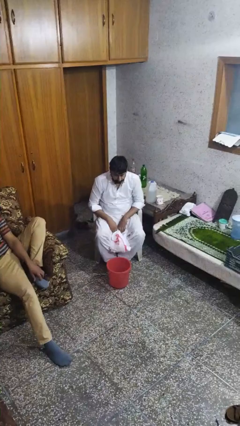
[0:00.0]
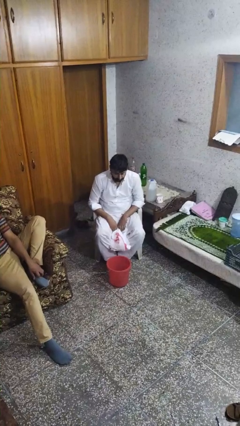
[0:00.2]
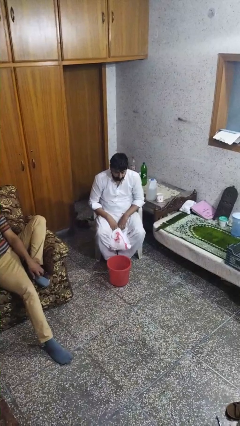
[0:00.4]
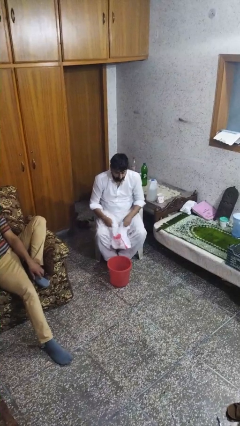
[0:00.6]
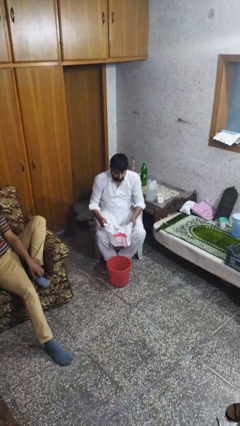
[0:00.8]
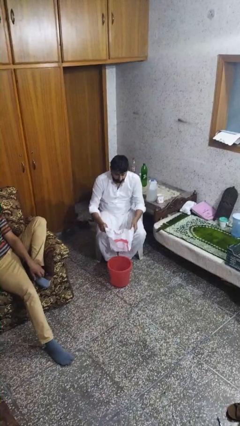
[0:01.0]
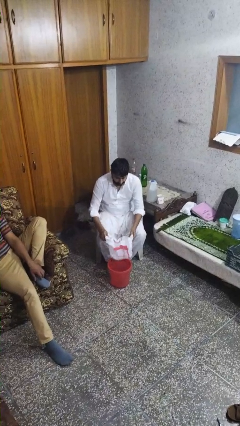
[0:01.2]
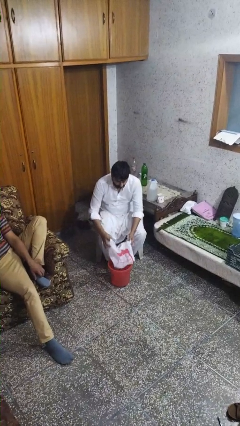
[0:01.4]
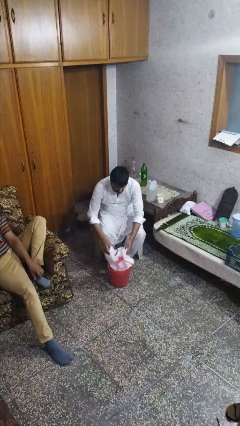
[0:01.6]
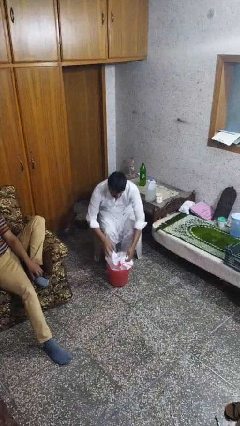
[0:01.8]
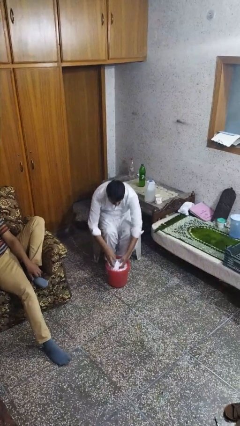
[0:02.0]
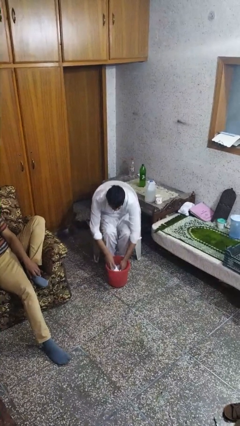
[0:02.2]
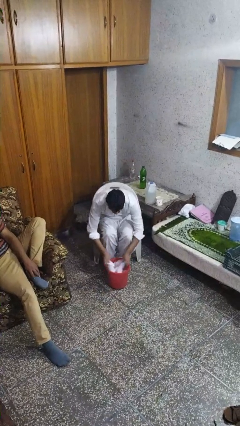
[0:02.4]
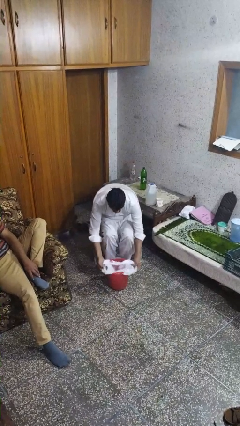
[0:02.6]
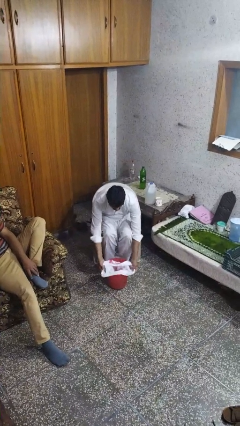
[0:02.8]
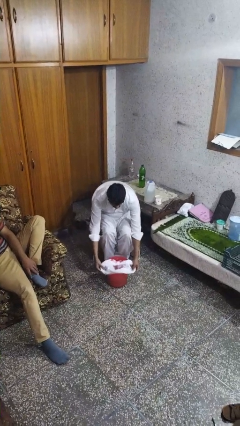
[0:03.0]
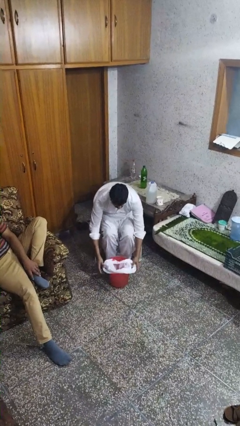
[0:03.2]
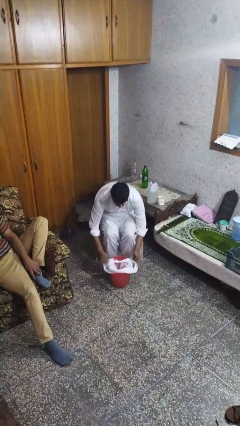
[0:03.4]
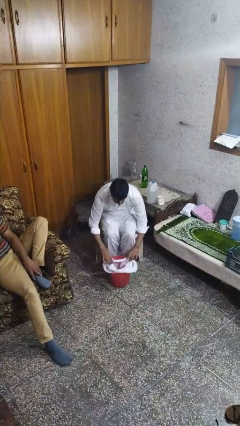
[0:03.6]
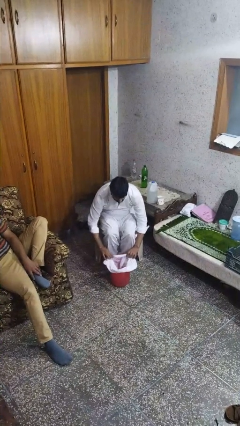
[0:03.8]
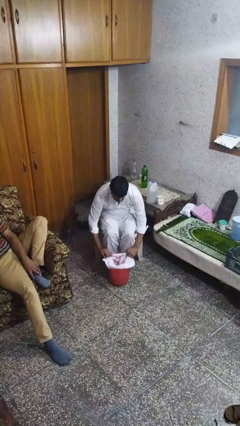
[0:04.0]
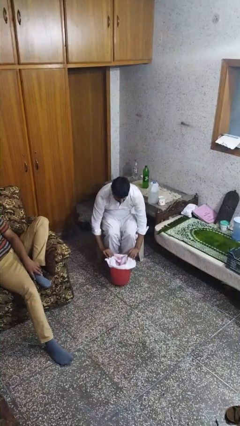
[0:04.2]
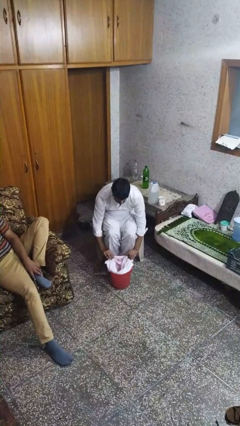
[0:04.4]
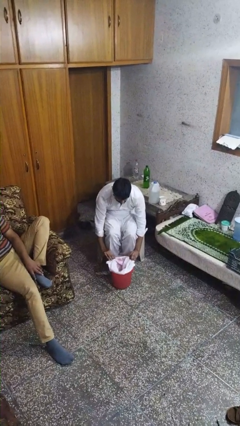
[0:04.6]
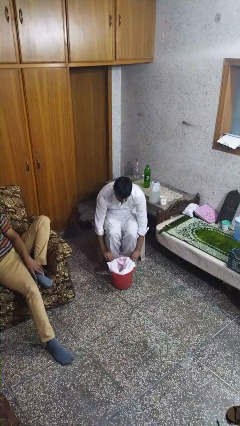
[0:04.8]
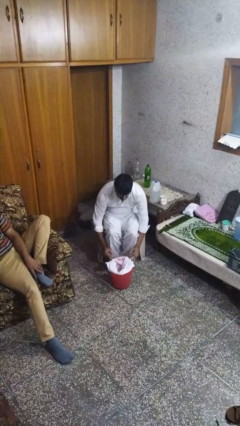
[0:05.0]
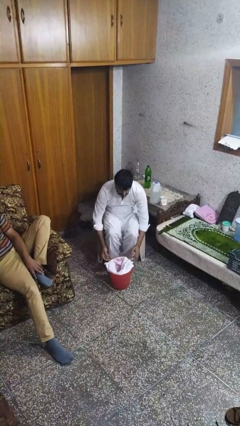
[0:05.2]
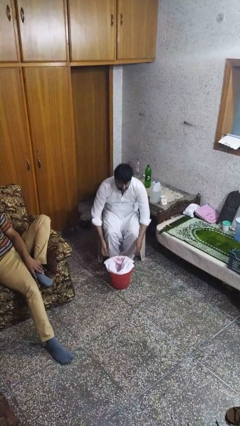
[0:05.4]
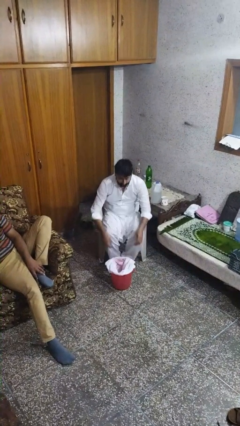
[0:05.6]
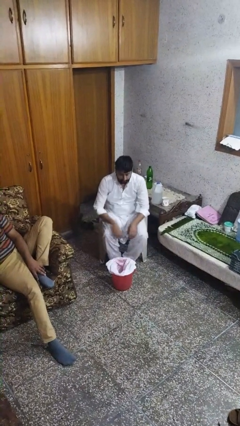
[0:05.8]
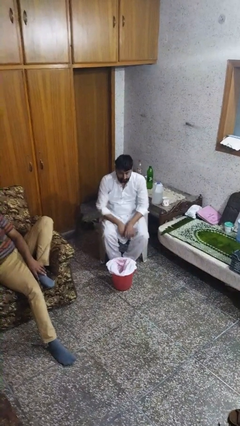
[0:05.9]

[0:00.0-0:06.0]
person inserts trashbag into trashcan

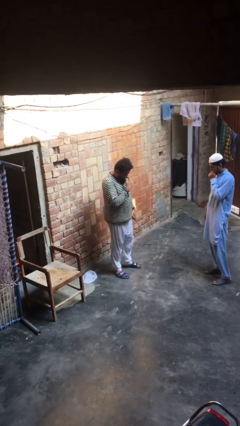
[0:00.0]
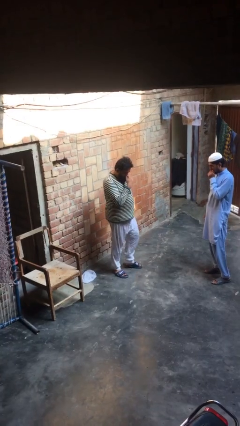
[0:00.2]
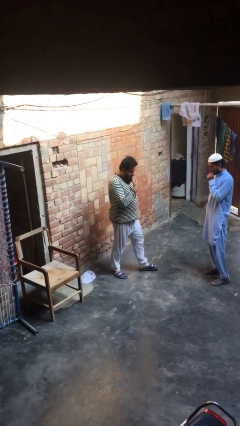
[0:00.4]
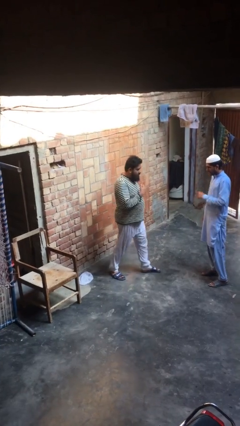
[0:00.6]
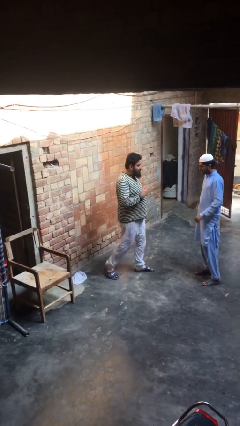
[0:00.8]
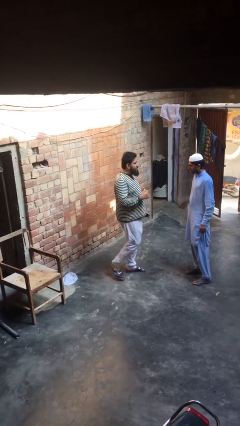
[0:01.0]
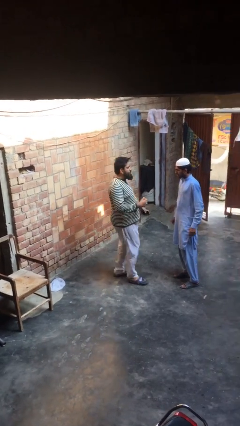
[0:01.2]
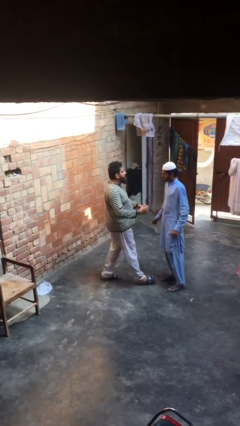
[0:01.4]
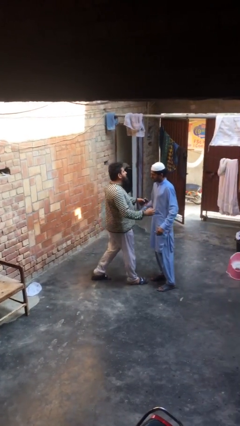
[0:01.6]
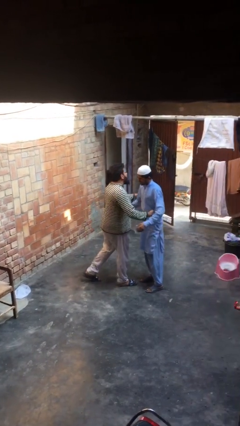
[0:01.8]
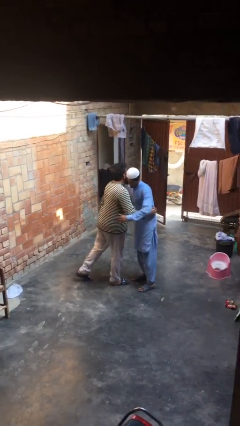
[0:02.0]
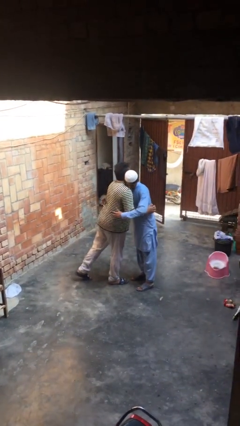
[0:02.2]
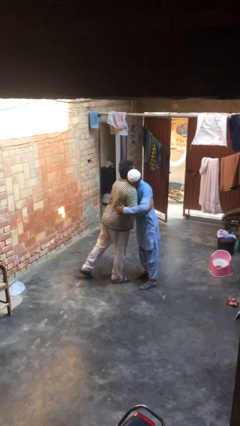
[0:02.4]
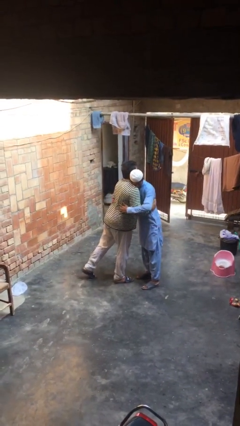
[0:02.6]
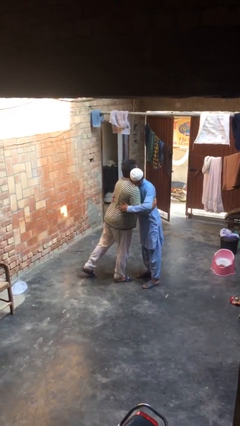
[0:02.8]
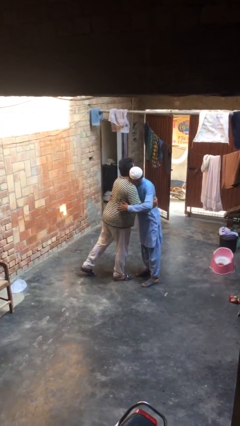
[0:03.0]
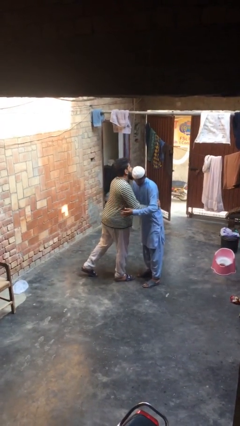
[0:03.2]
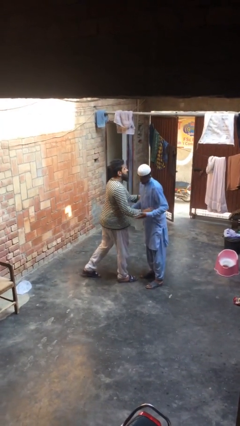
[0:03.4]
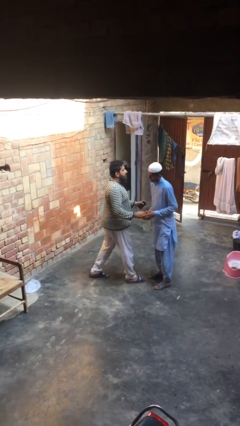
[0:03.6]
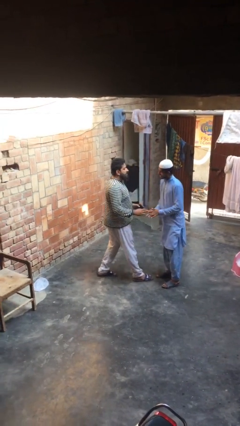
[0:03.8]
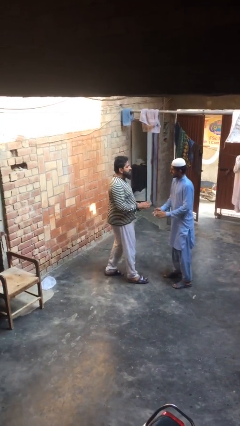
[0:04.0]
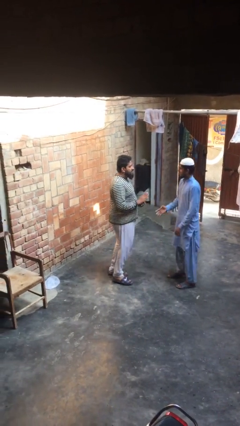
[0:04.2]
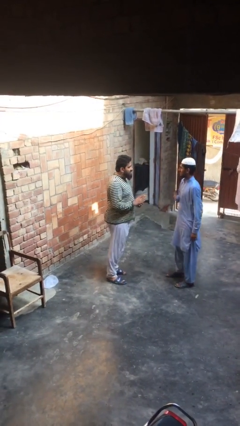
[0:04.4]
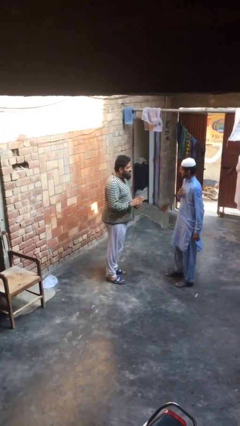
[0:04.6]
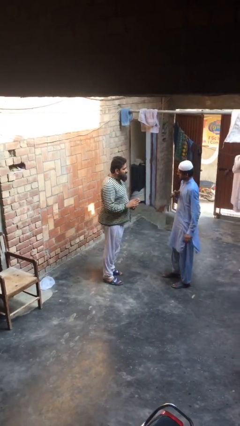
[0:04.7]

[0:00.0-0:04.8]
person embraces person

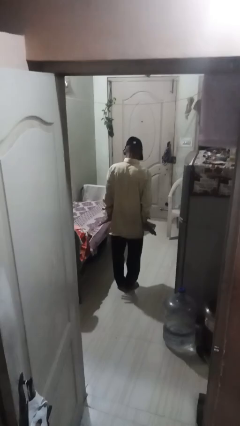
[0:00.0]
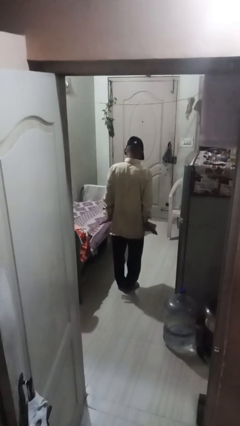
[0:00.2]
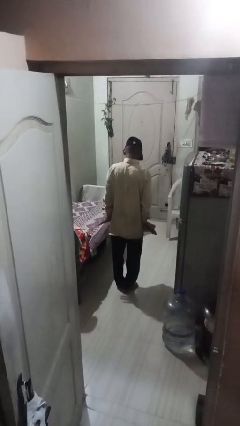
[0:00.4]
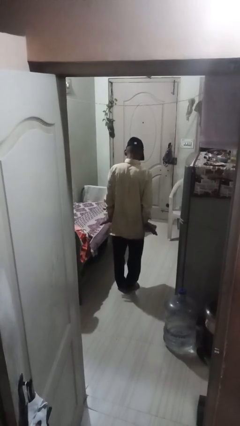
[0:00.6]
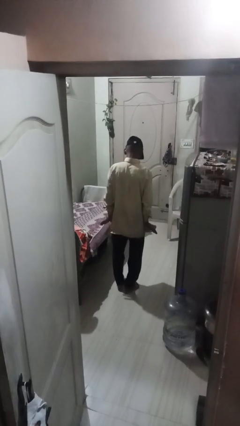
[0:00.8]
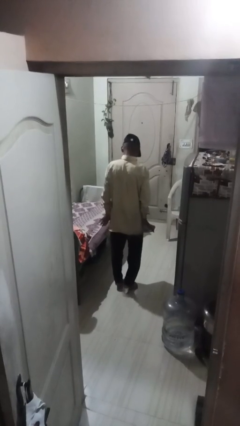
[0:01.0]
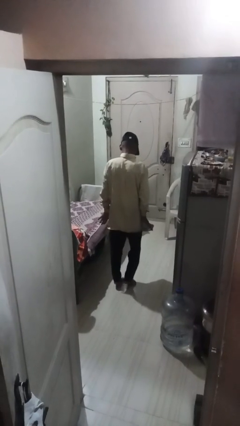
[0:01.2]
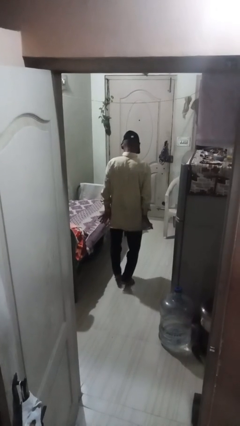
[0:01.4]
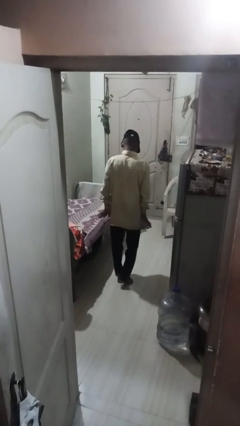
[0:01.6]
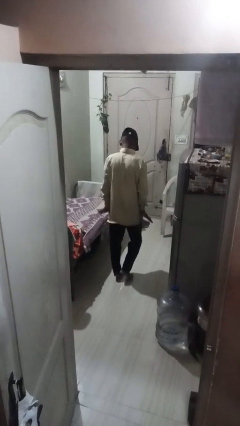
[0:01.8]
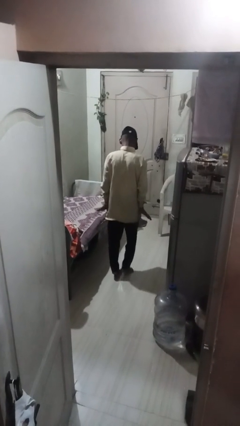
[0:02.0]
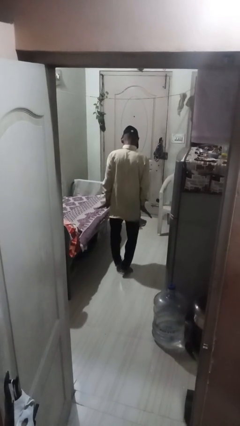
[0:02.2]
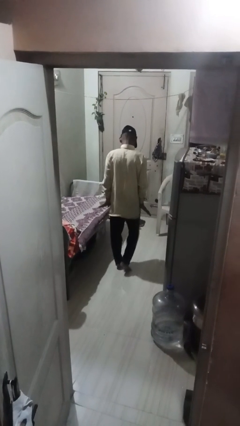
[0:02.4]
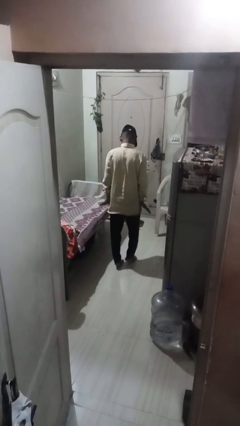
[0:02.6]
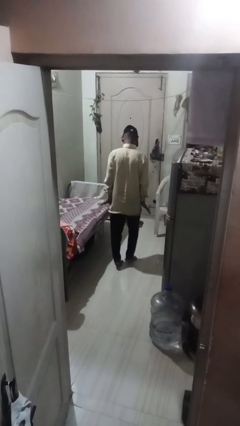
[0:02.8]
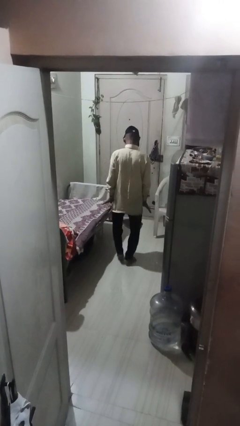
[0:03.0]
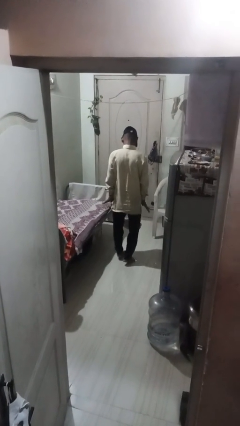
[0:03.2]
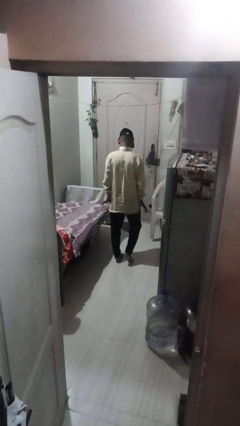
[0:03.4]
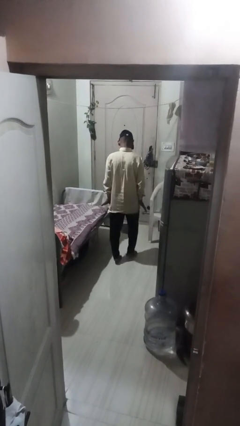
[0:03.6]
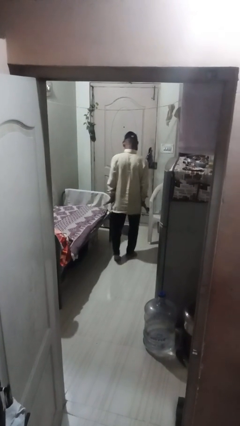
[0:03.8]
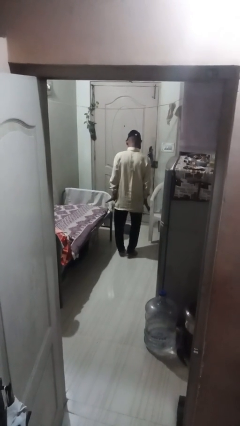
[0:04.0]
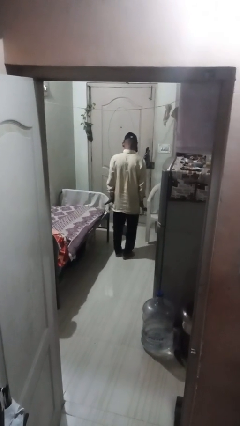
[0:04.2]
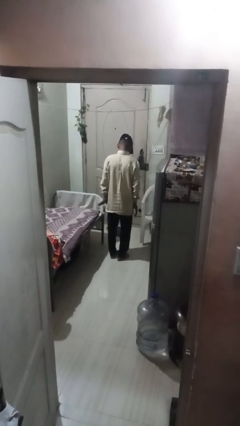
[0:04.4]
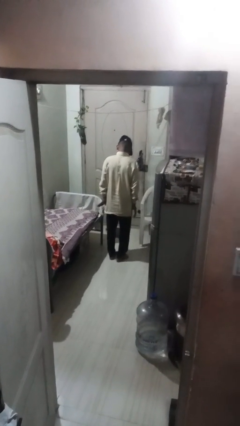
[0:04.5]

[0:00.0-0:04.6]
person walks tiptoe

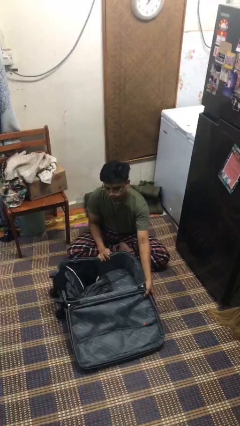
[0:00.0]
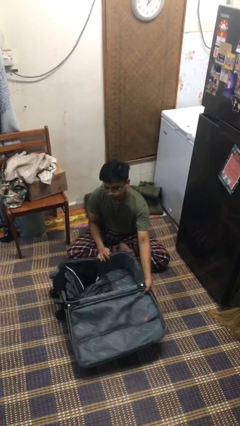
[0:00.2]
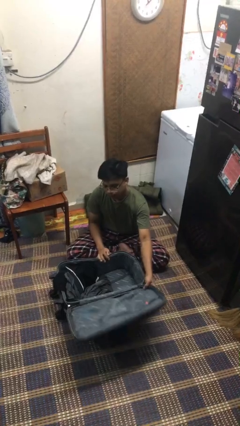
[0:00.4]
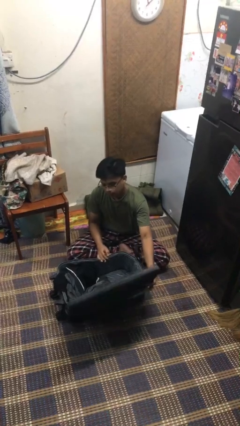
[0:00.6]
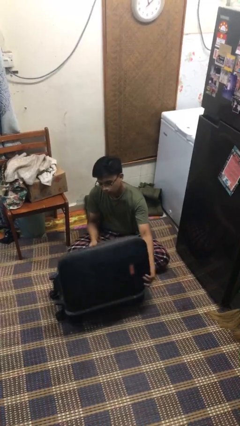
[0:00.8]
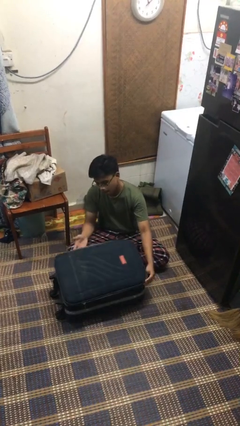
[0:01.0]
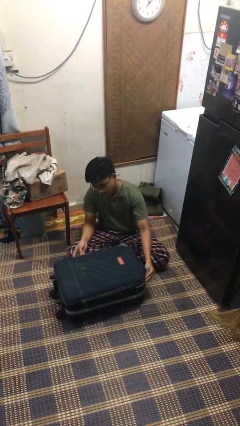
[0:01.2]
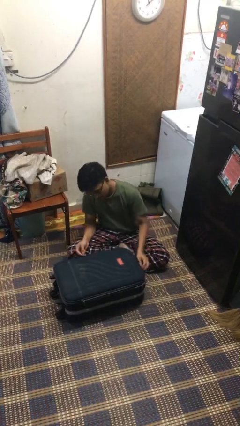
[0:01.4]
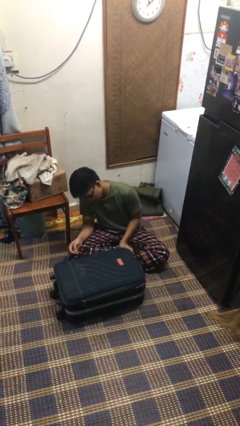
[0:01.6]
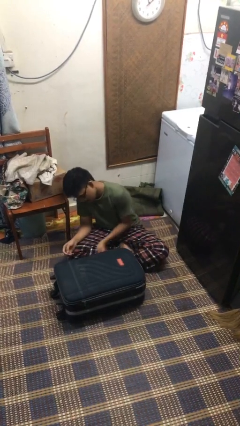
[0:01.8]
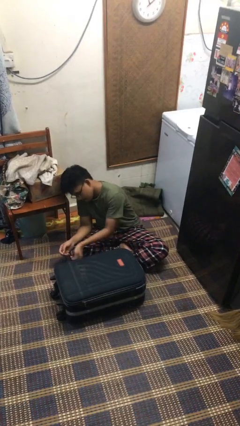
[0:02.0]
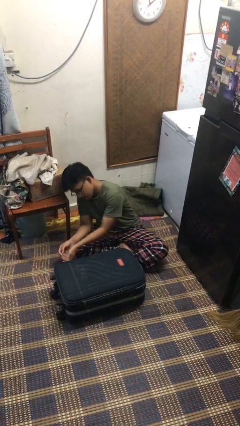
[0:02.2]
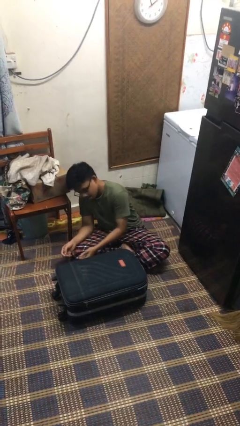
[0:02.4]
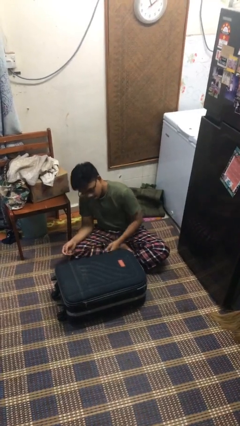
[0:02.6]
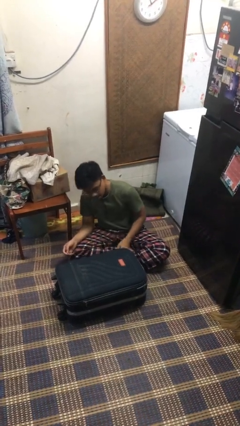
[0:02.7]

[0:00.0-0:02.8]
person closes suitcase
